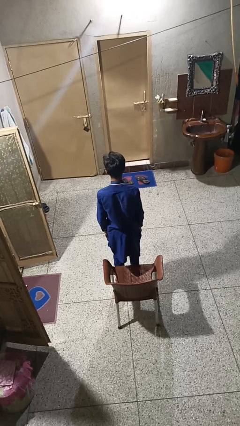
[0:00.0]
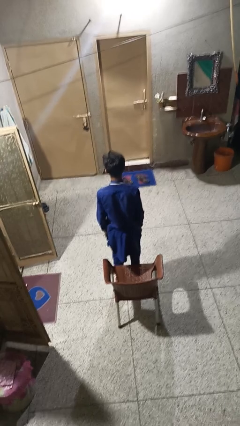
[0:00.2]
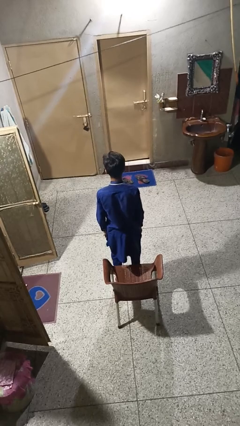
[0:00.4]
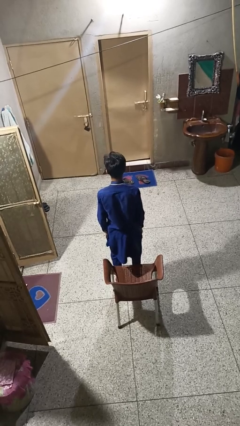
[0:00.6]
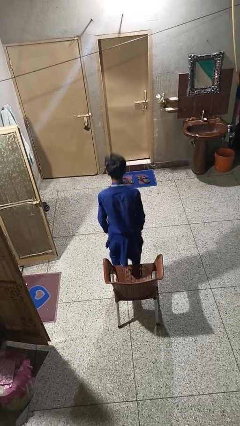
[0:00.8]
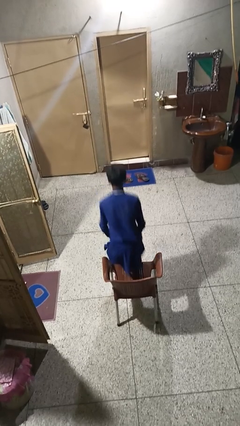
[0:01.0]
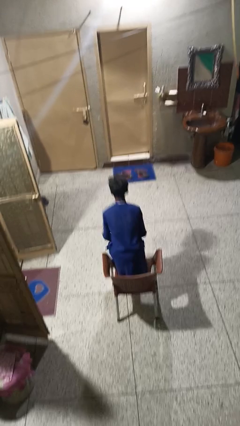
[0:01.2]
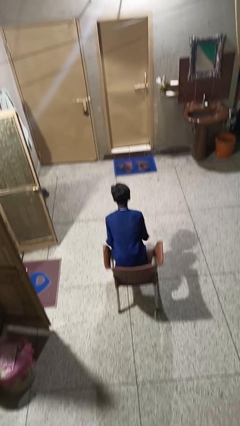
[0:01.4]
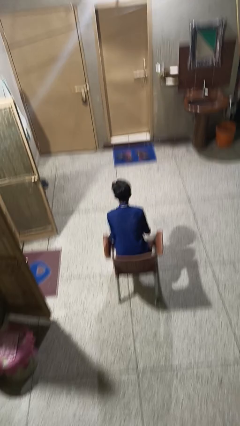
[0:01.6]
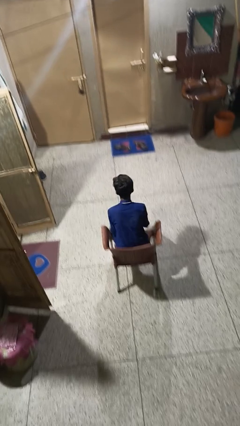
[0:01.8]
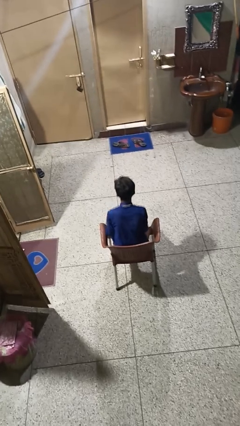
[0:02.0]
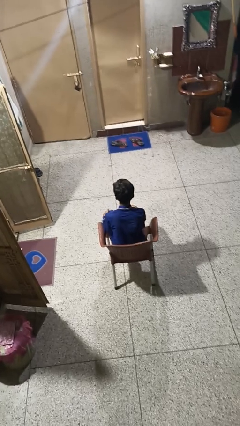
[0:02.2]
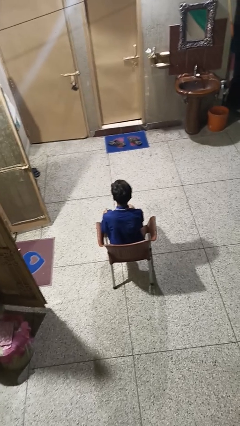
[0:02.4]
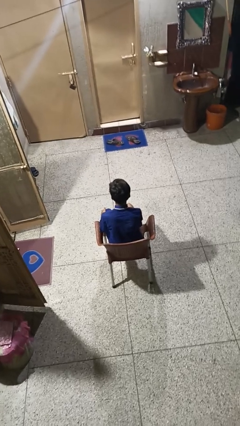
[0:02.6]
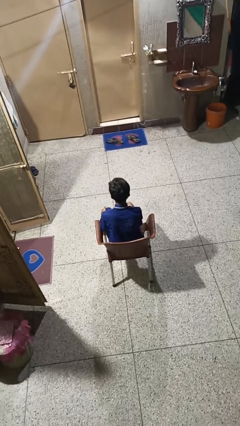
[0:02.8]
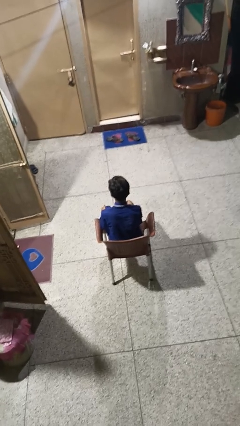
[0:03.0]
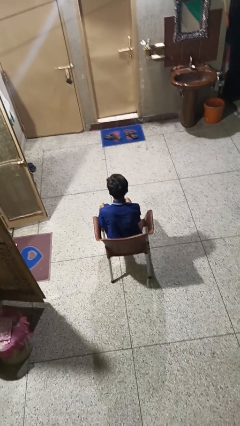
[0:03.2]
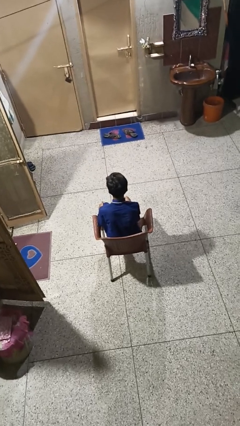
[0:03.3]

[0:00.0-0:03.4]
person sits down

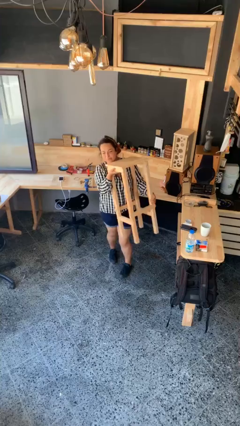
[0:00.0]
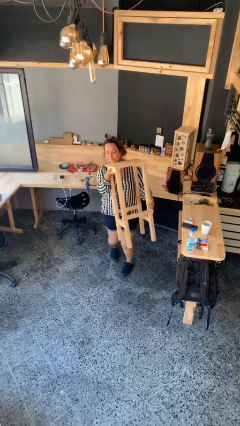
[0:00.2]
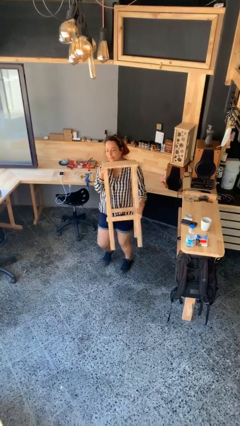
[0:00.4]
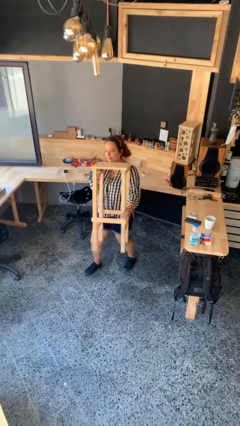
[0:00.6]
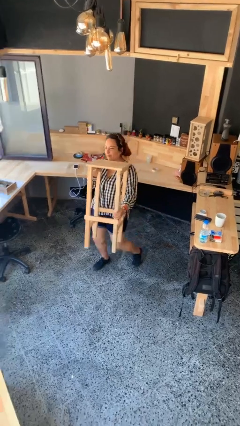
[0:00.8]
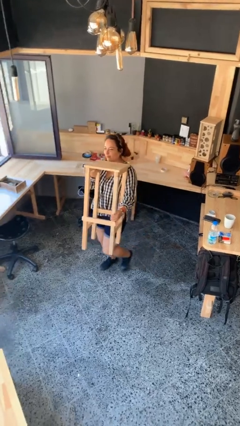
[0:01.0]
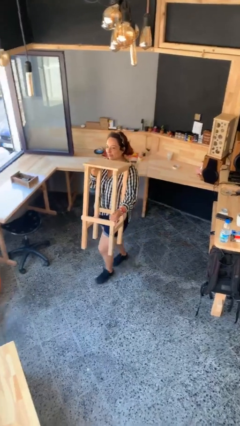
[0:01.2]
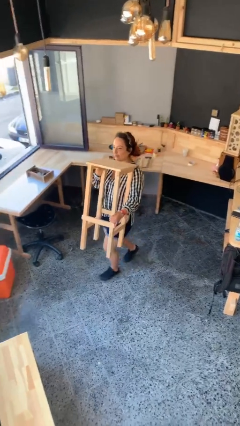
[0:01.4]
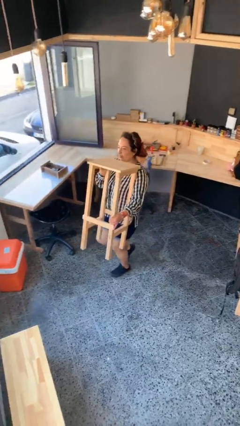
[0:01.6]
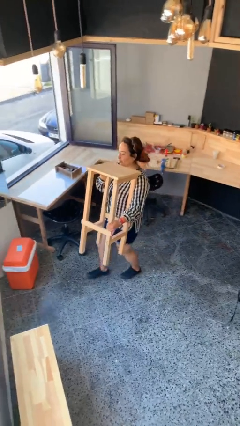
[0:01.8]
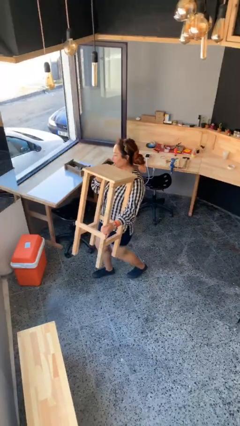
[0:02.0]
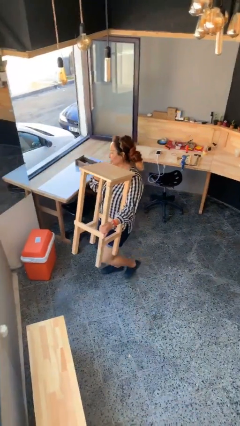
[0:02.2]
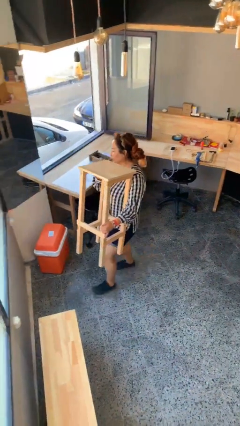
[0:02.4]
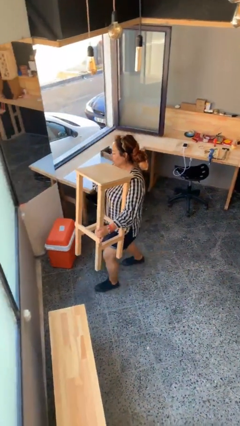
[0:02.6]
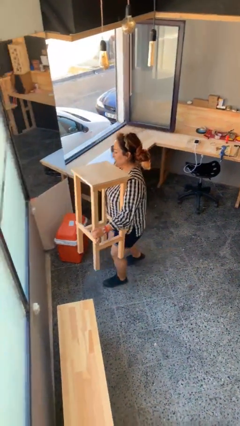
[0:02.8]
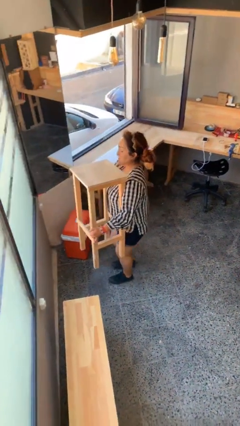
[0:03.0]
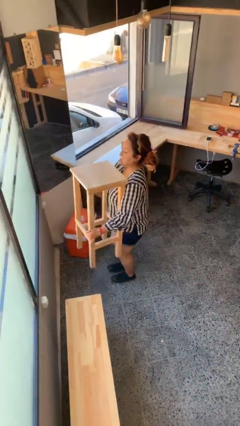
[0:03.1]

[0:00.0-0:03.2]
person carries heavy object

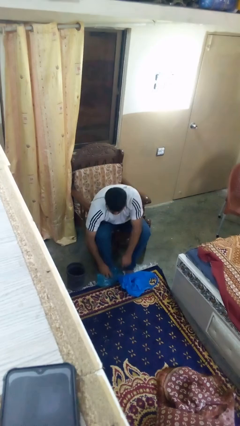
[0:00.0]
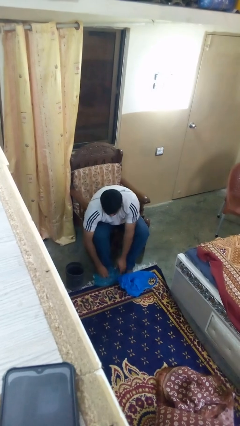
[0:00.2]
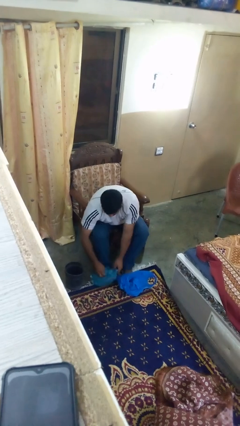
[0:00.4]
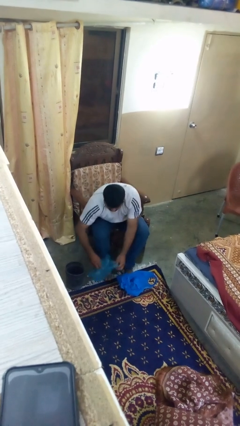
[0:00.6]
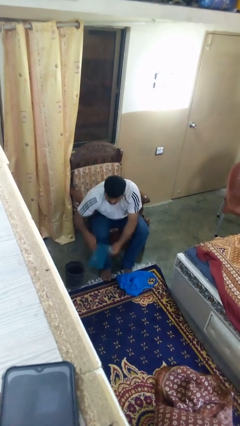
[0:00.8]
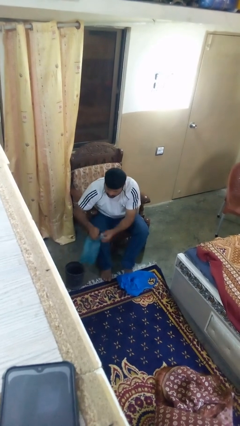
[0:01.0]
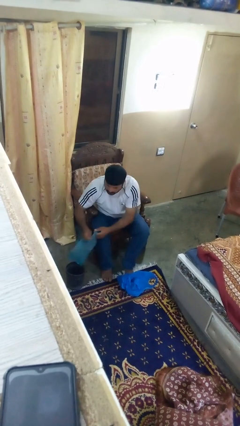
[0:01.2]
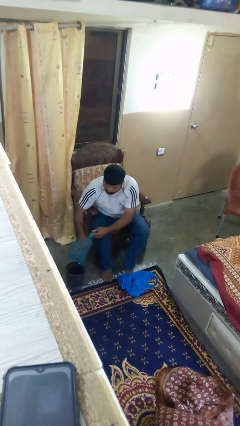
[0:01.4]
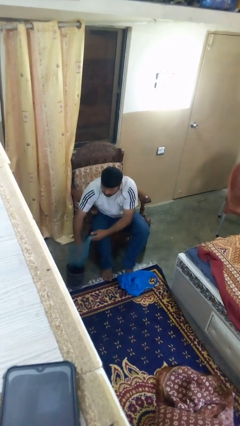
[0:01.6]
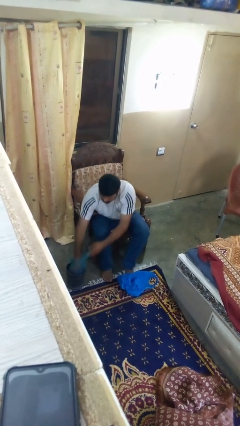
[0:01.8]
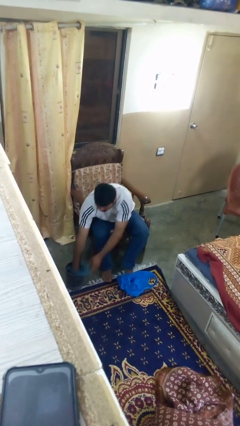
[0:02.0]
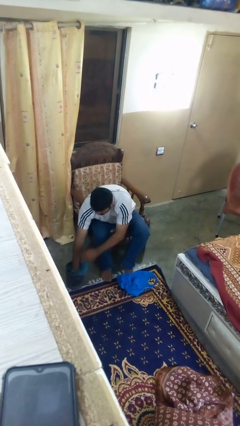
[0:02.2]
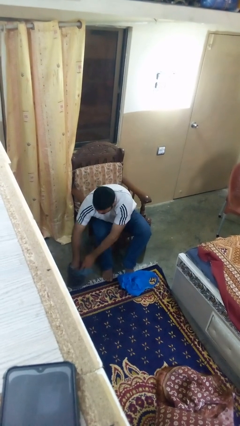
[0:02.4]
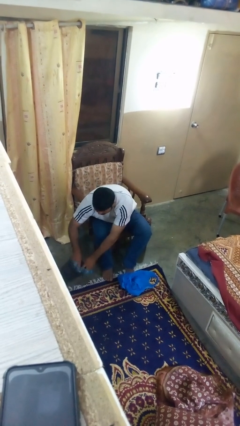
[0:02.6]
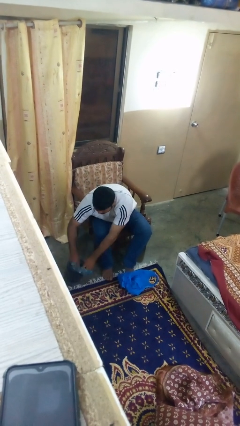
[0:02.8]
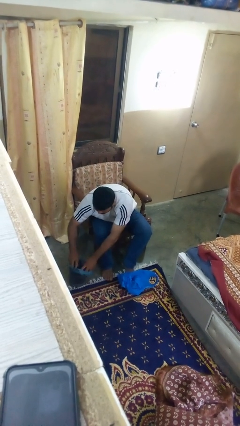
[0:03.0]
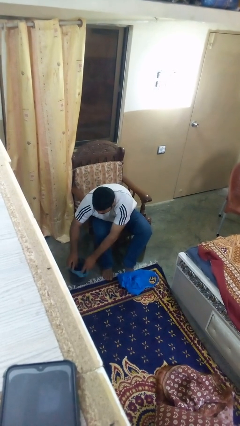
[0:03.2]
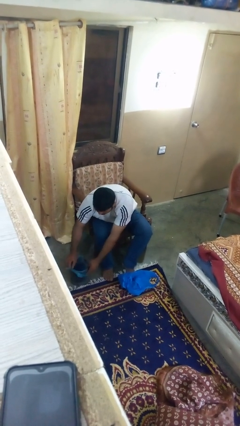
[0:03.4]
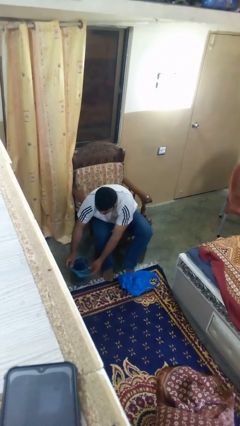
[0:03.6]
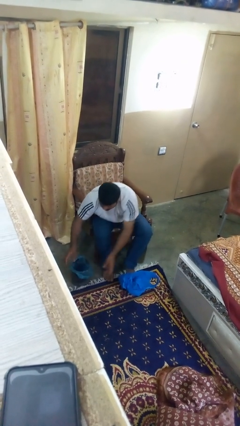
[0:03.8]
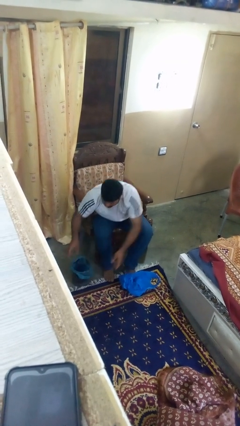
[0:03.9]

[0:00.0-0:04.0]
person inserts trashbag into trashcan

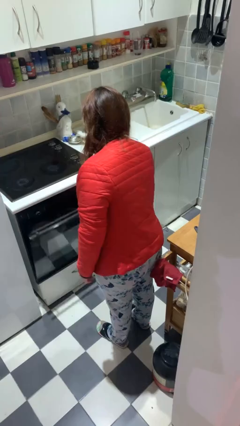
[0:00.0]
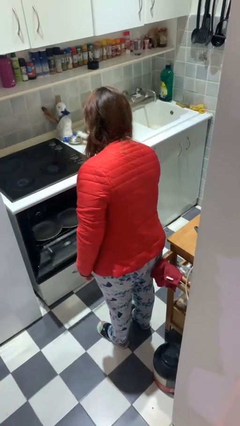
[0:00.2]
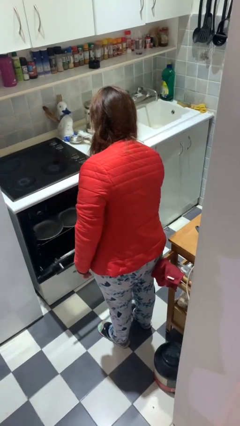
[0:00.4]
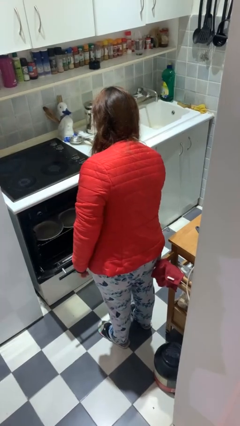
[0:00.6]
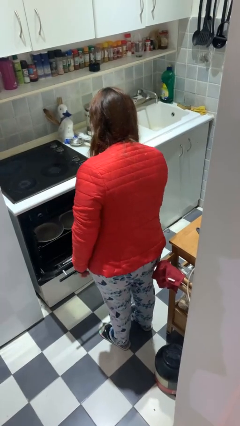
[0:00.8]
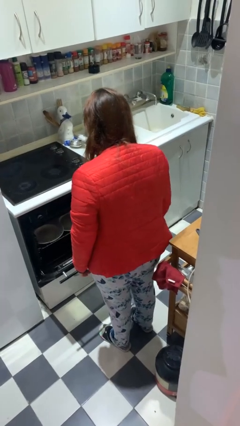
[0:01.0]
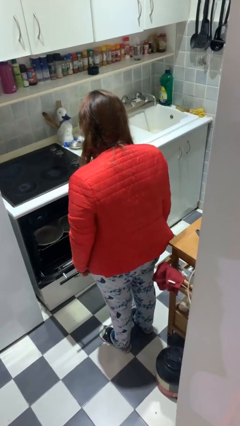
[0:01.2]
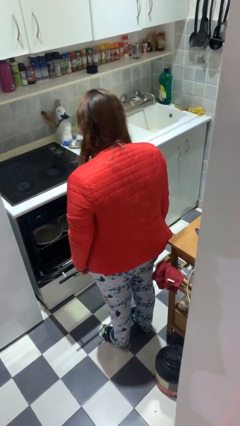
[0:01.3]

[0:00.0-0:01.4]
person opens dishwasher

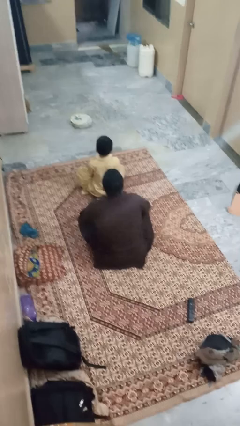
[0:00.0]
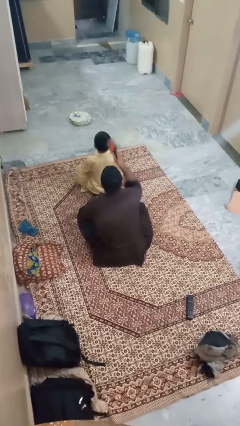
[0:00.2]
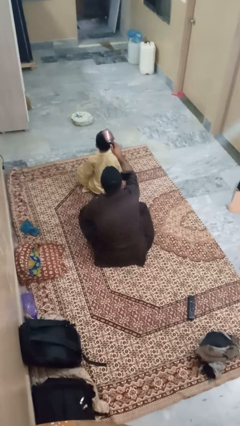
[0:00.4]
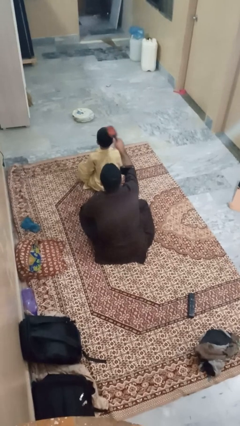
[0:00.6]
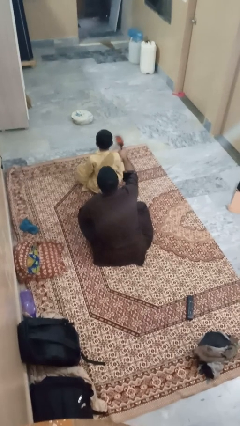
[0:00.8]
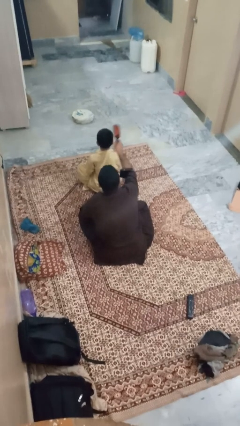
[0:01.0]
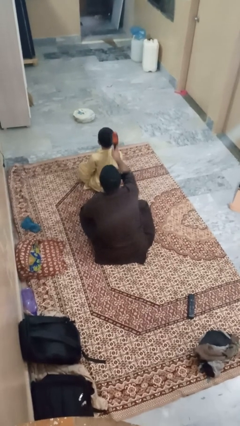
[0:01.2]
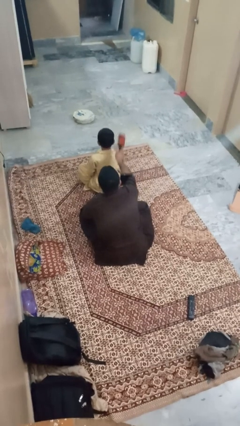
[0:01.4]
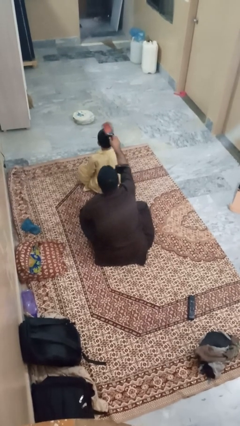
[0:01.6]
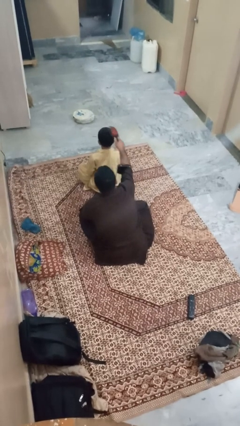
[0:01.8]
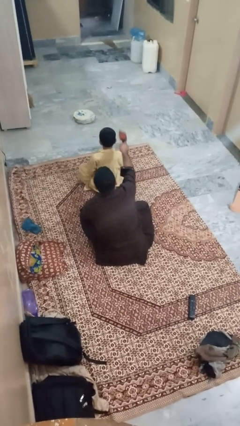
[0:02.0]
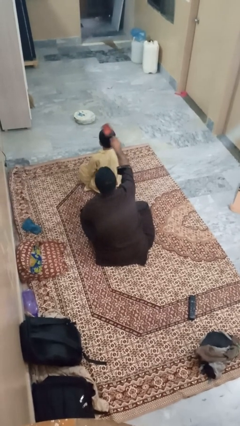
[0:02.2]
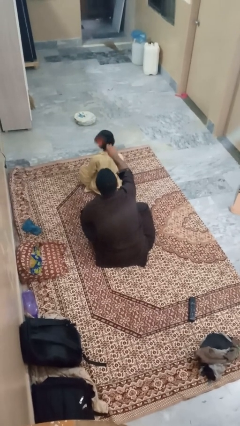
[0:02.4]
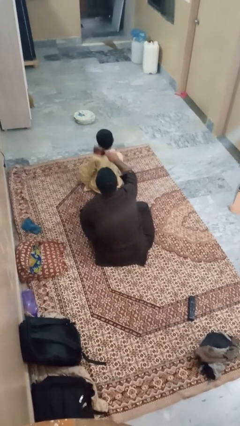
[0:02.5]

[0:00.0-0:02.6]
person brushes hair of person

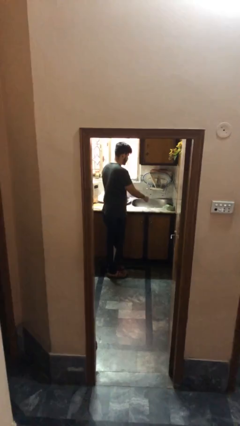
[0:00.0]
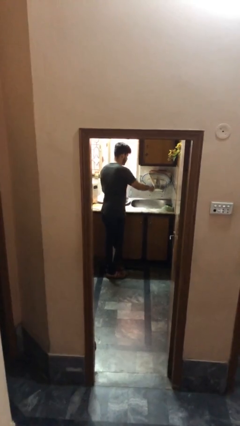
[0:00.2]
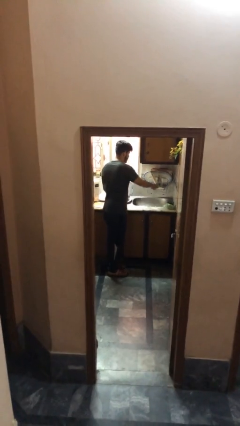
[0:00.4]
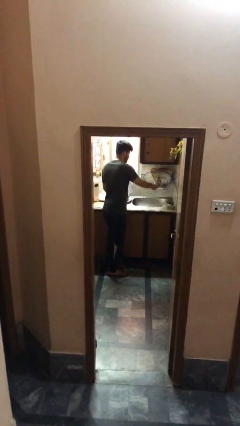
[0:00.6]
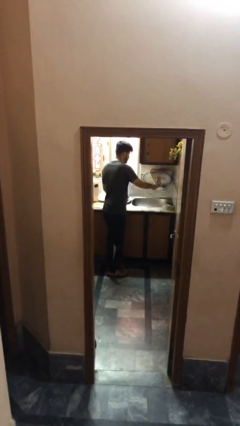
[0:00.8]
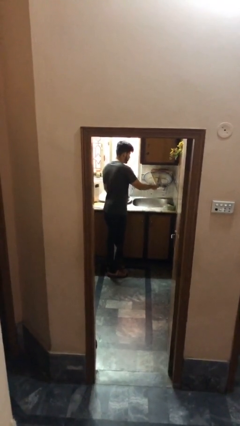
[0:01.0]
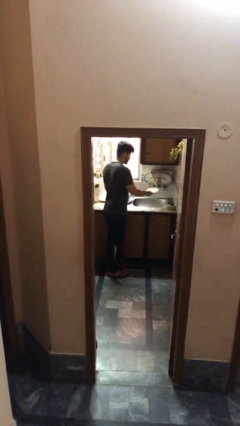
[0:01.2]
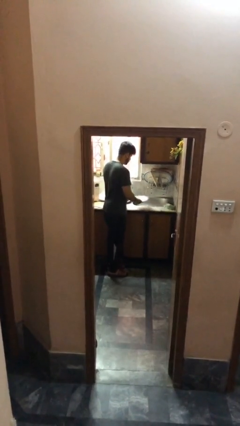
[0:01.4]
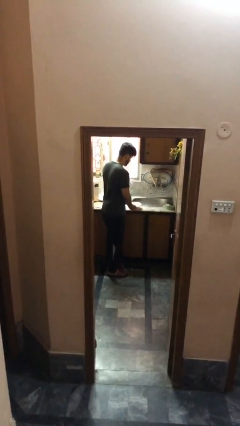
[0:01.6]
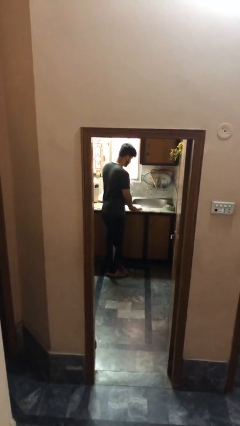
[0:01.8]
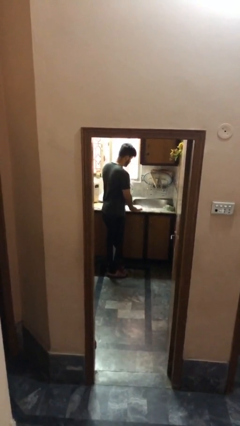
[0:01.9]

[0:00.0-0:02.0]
person unloads dishwasher

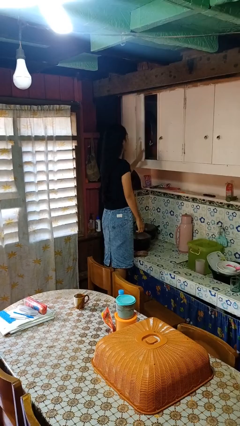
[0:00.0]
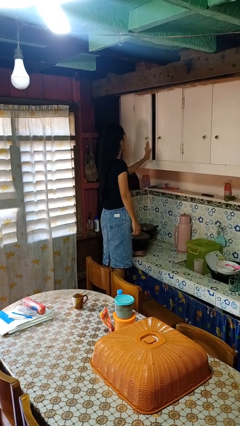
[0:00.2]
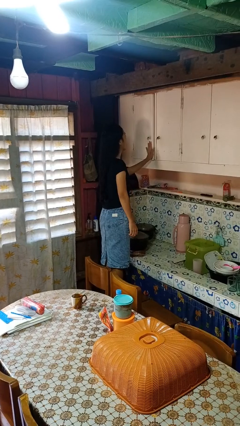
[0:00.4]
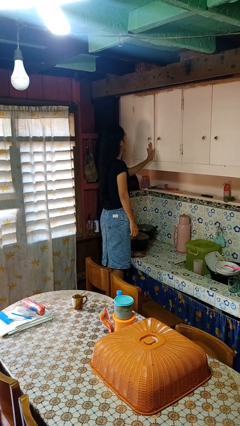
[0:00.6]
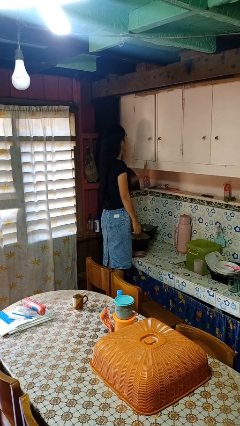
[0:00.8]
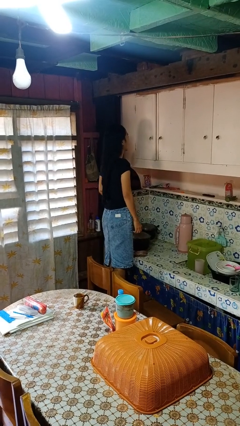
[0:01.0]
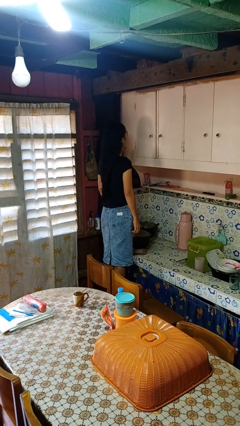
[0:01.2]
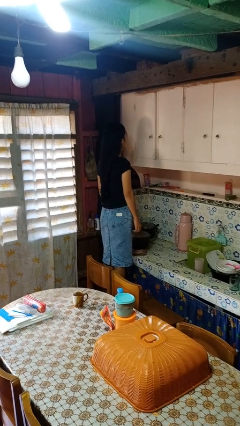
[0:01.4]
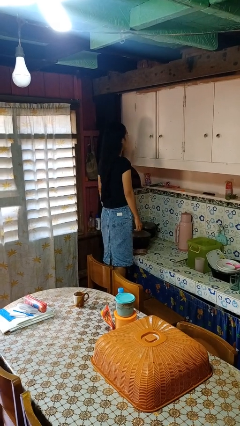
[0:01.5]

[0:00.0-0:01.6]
person closes cabinet
